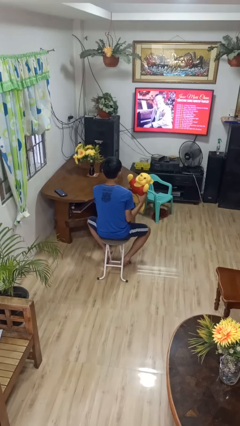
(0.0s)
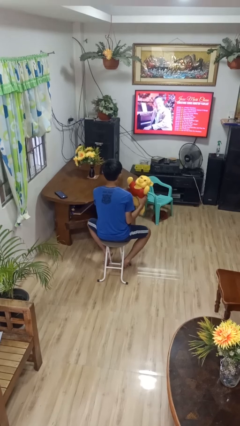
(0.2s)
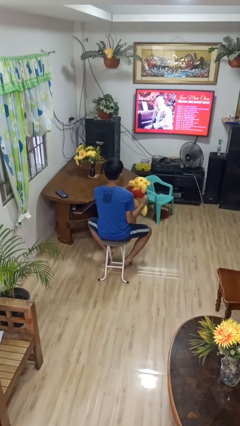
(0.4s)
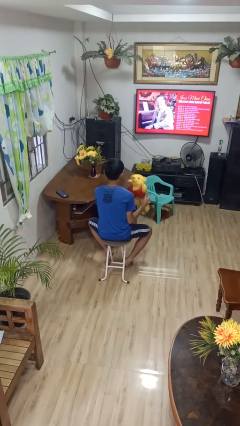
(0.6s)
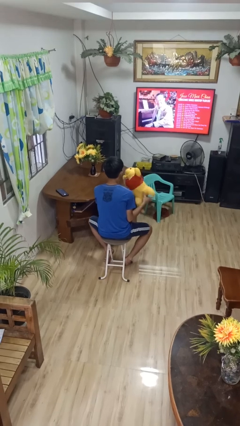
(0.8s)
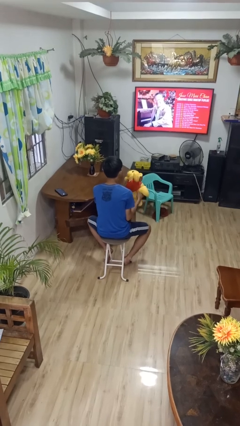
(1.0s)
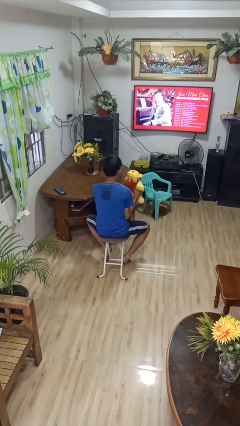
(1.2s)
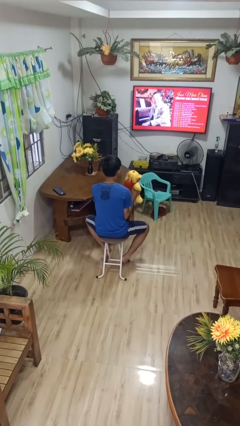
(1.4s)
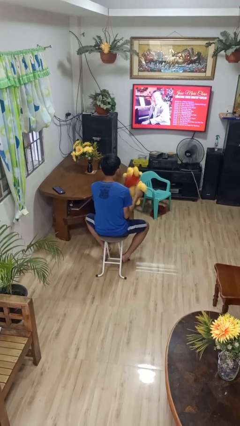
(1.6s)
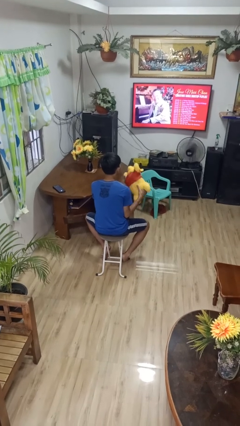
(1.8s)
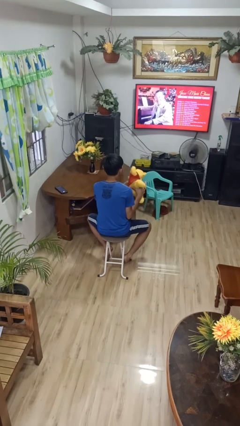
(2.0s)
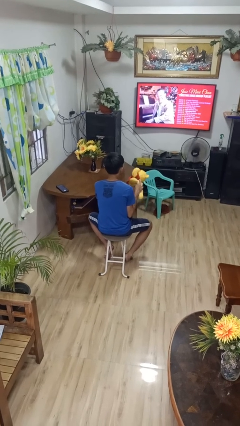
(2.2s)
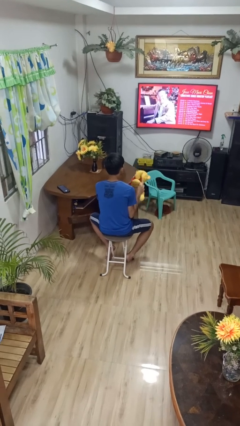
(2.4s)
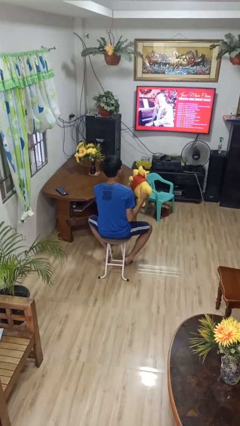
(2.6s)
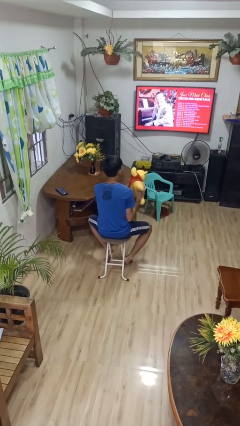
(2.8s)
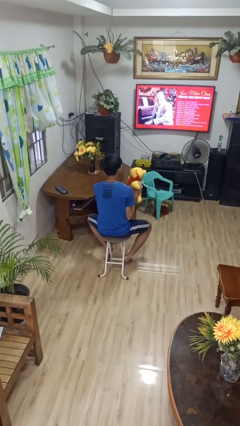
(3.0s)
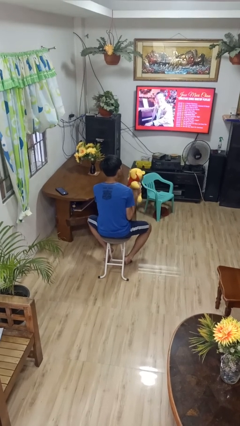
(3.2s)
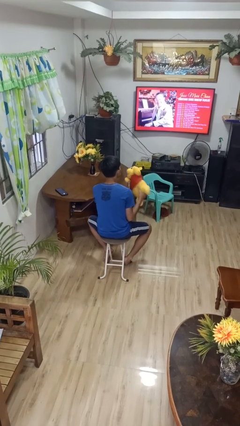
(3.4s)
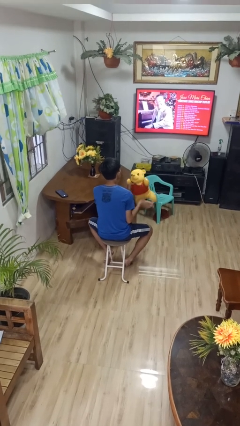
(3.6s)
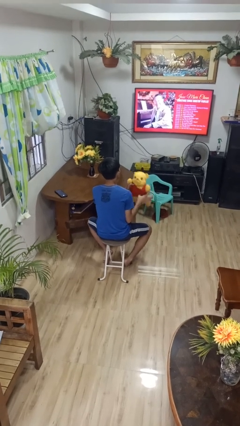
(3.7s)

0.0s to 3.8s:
person squeezes object

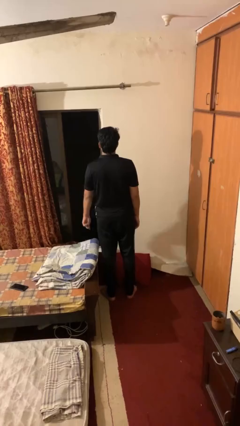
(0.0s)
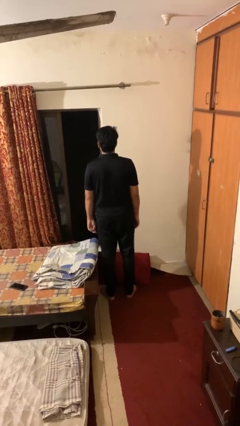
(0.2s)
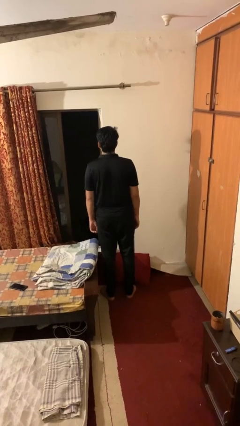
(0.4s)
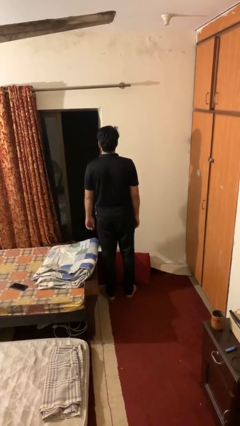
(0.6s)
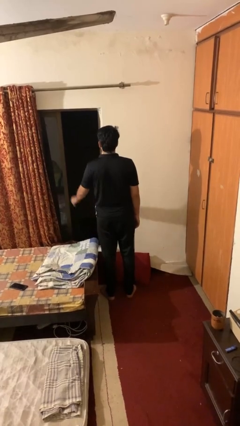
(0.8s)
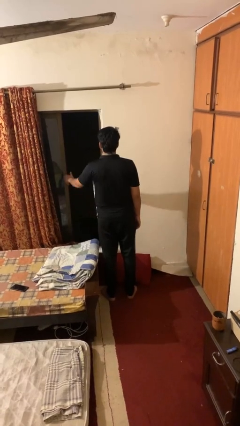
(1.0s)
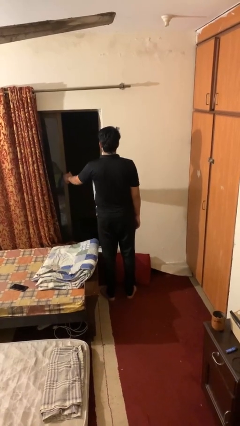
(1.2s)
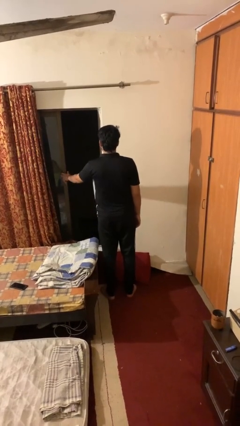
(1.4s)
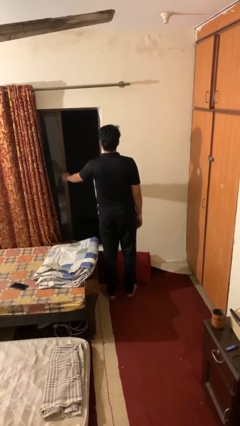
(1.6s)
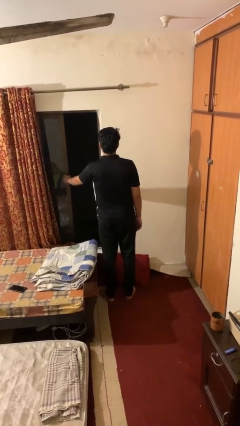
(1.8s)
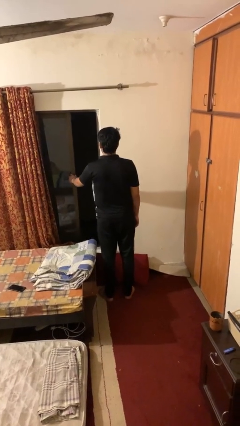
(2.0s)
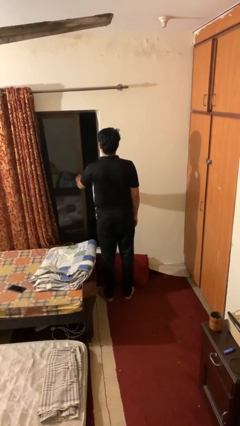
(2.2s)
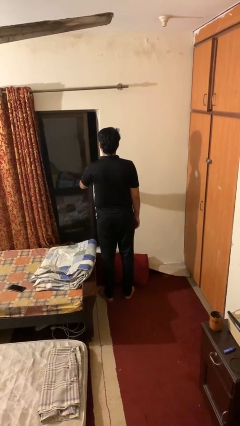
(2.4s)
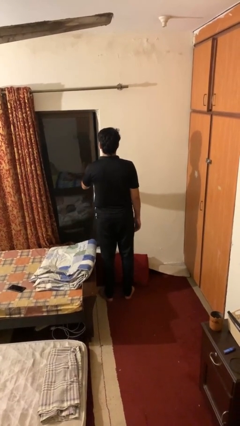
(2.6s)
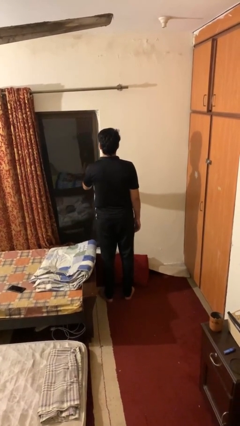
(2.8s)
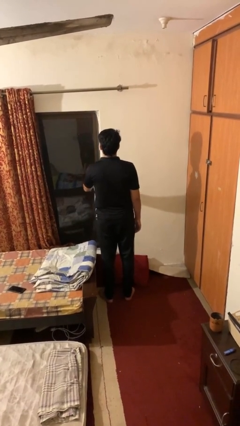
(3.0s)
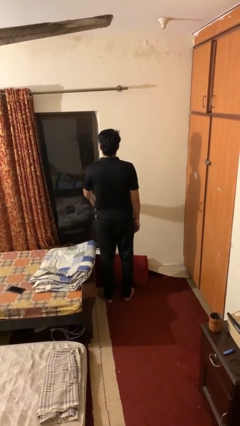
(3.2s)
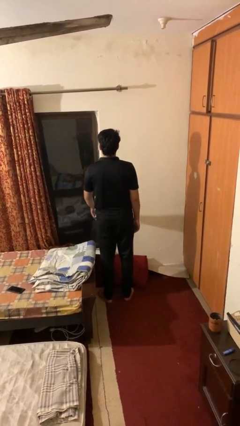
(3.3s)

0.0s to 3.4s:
person closes home window

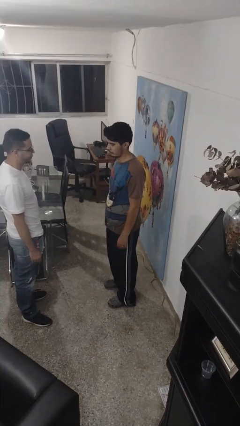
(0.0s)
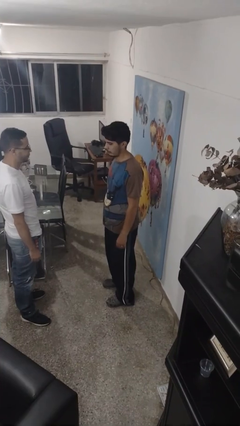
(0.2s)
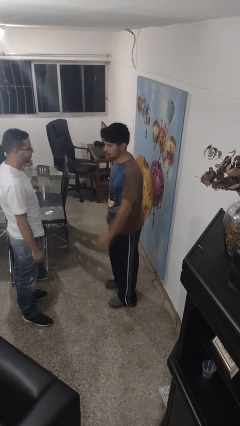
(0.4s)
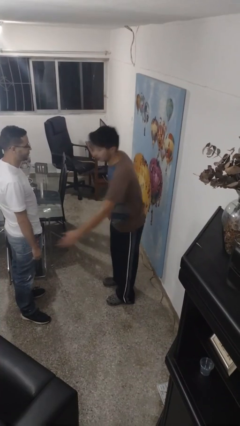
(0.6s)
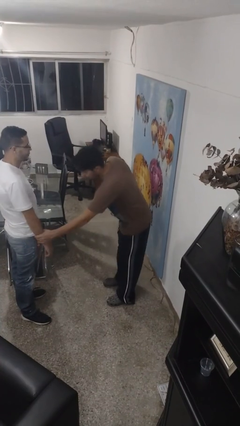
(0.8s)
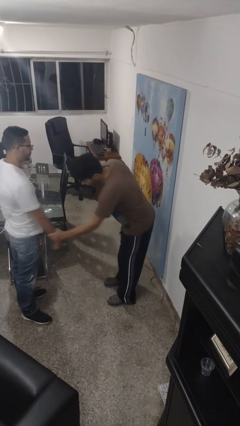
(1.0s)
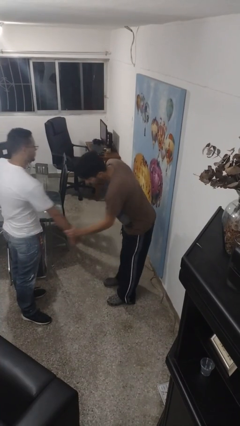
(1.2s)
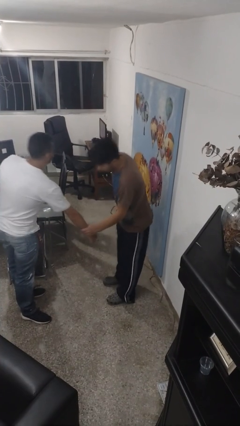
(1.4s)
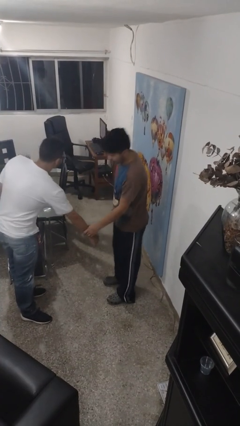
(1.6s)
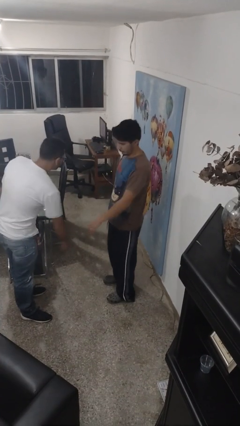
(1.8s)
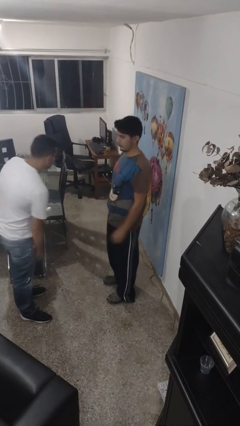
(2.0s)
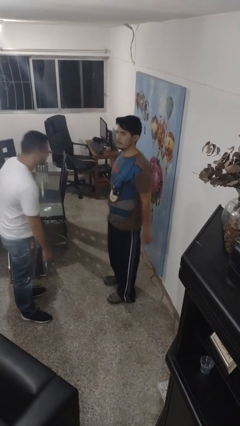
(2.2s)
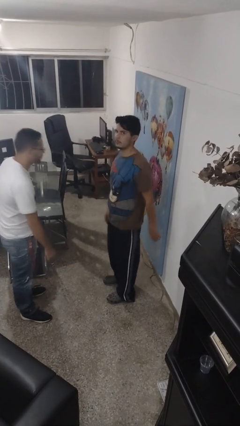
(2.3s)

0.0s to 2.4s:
person grabs person by forearm

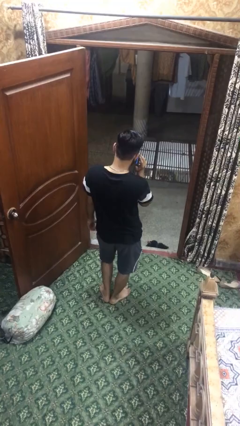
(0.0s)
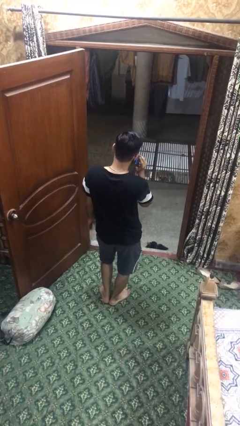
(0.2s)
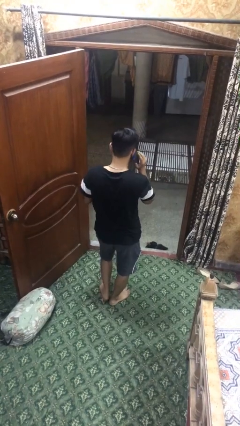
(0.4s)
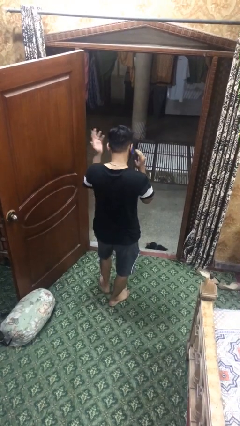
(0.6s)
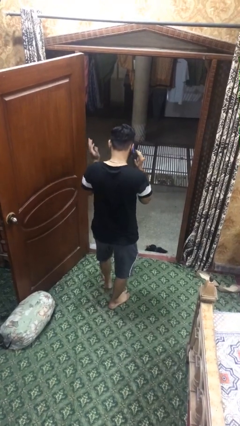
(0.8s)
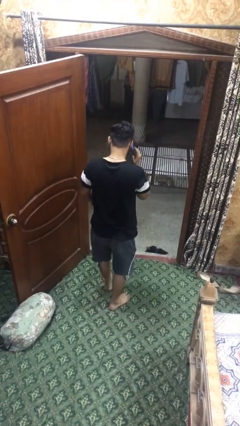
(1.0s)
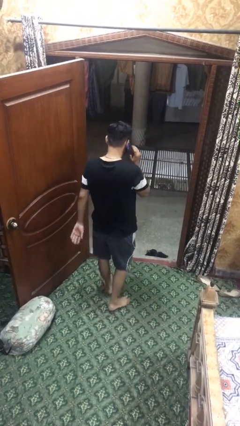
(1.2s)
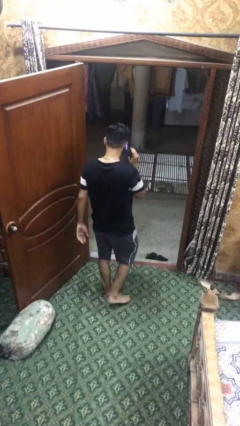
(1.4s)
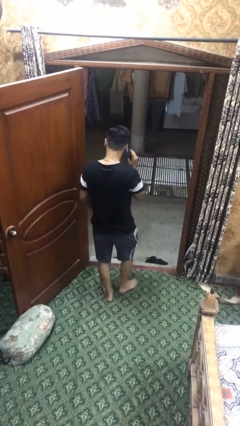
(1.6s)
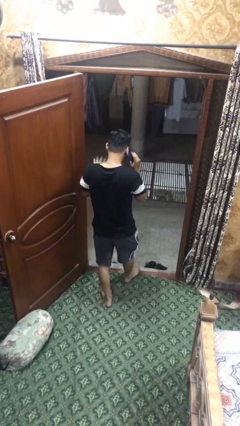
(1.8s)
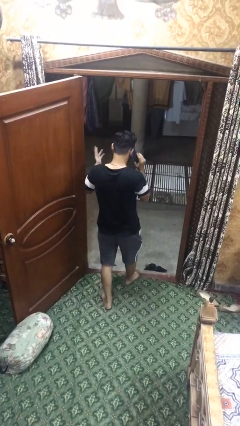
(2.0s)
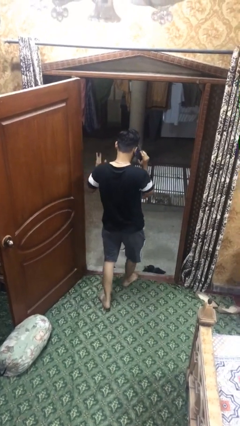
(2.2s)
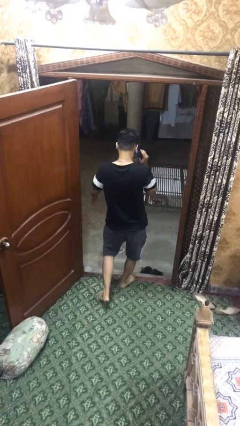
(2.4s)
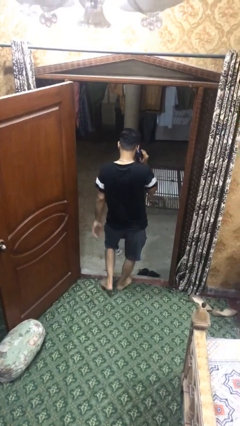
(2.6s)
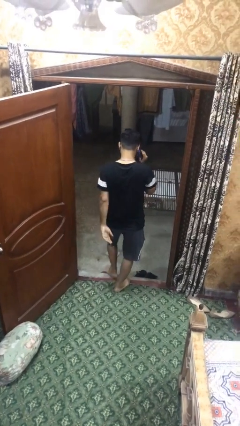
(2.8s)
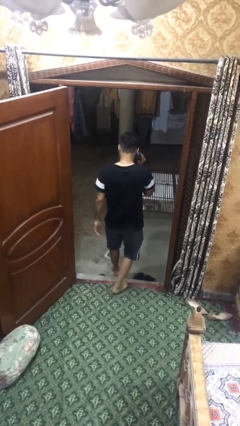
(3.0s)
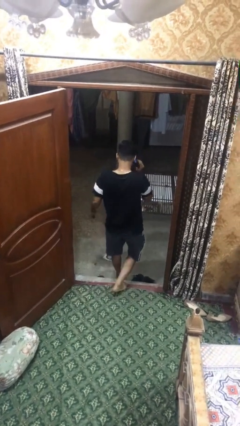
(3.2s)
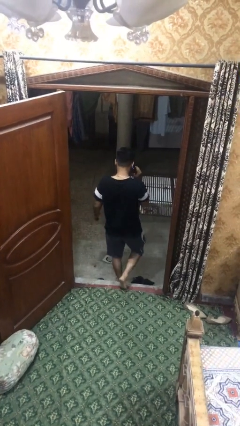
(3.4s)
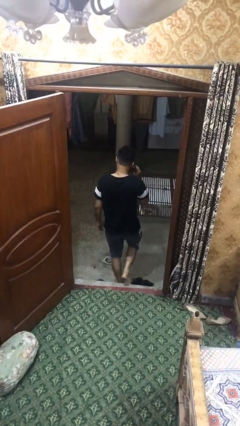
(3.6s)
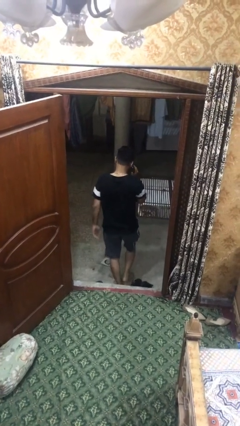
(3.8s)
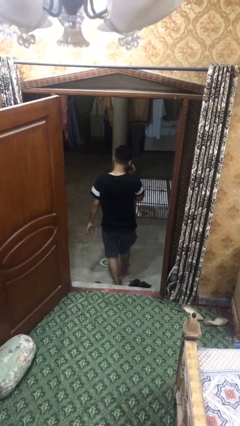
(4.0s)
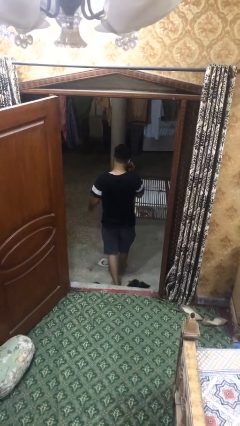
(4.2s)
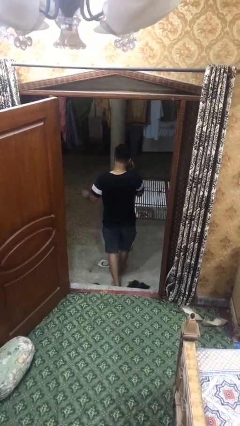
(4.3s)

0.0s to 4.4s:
person exits scene through structure

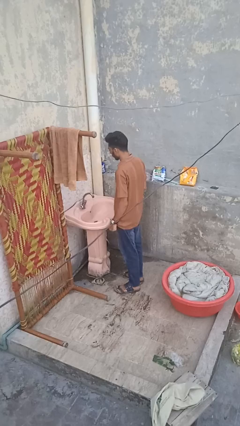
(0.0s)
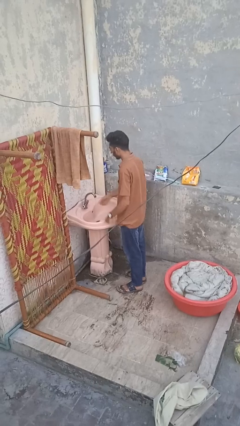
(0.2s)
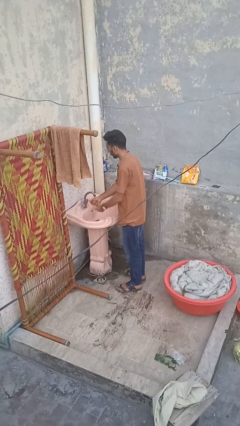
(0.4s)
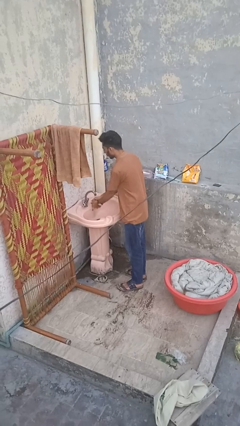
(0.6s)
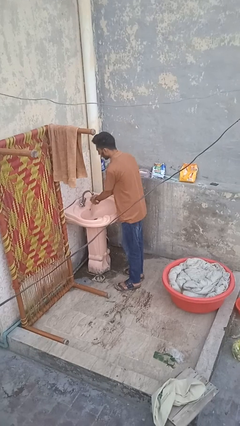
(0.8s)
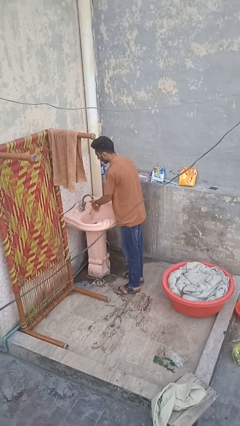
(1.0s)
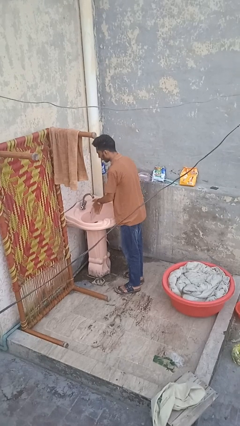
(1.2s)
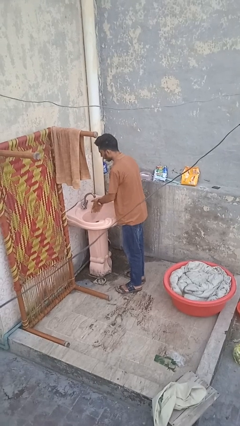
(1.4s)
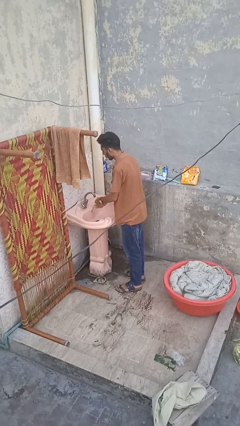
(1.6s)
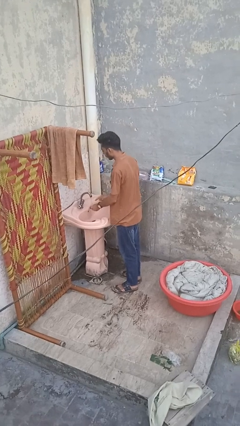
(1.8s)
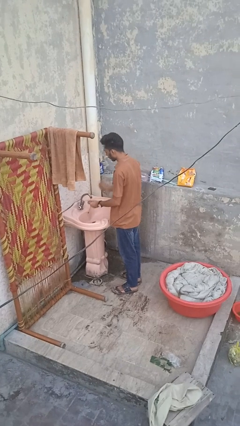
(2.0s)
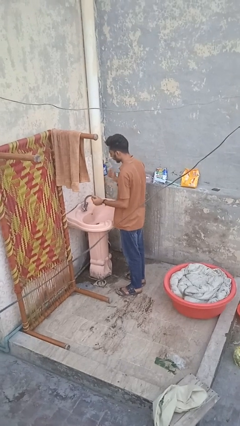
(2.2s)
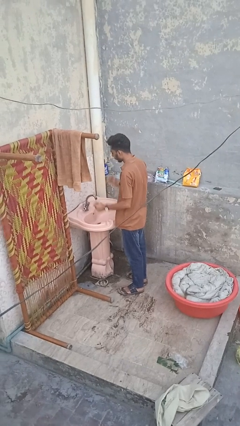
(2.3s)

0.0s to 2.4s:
person washes hands

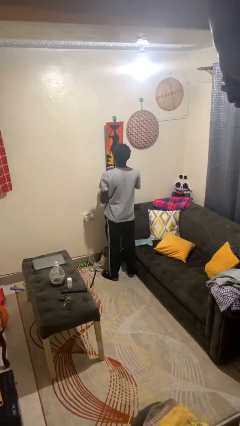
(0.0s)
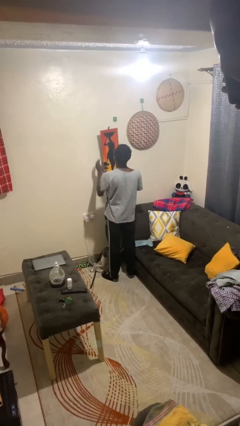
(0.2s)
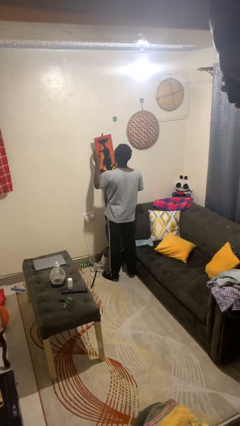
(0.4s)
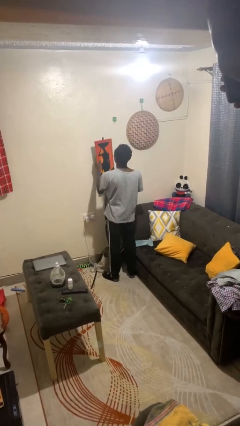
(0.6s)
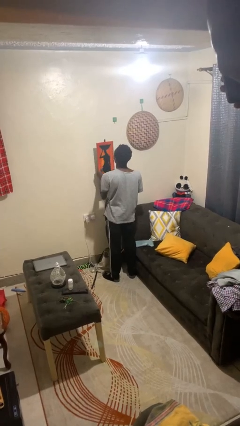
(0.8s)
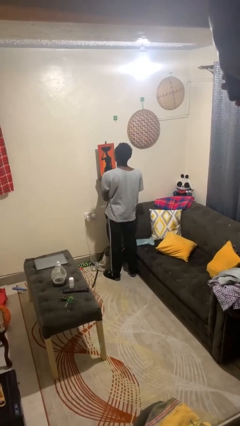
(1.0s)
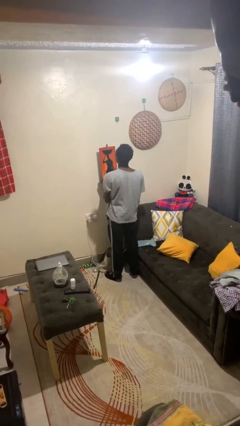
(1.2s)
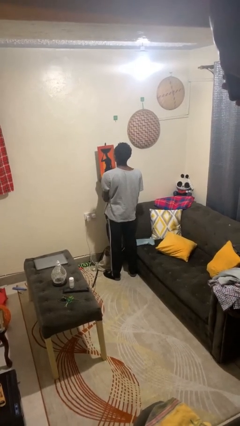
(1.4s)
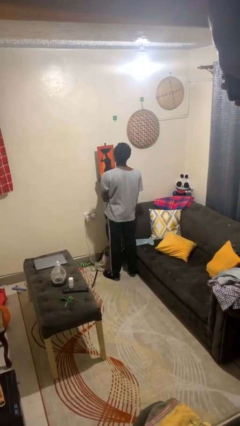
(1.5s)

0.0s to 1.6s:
person takes down picture frame
